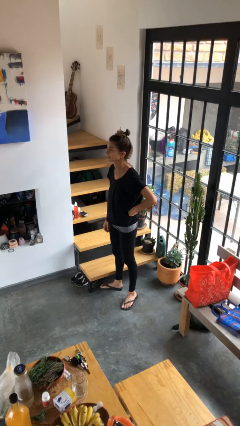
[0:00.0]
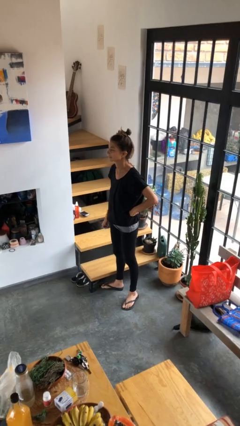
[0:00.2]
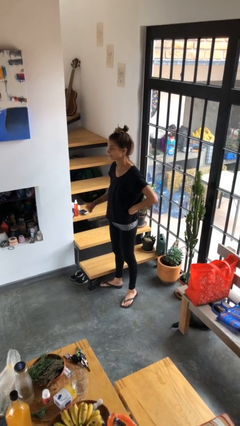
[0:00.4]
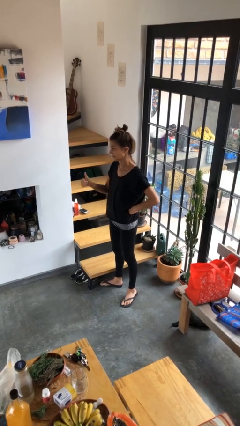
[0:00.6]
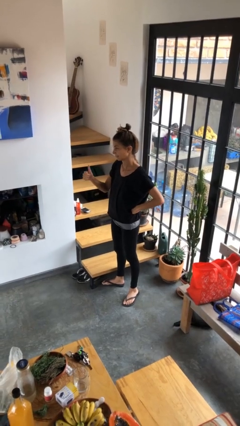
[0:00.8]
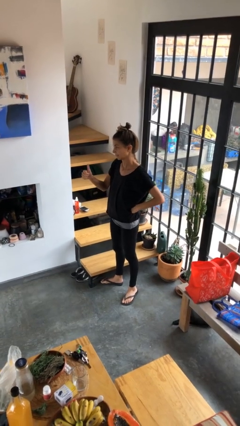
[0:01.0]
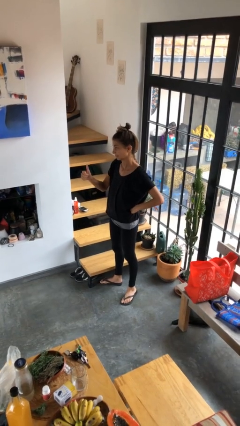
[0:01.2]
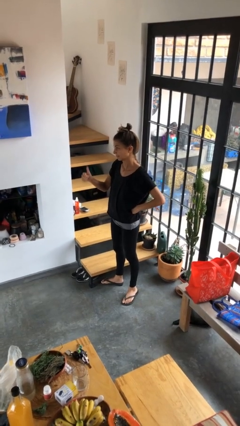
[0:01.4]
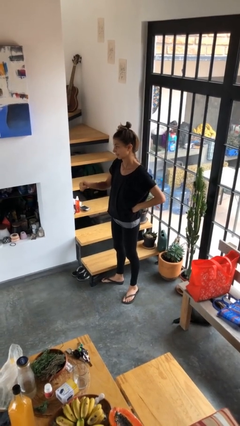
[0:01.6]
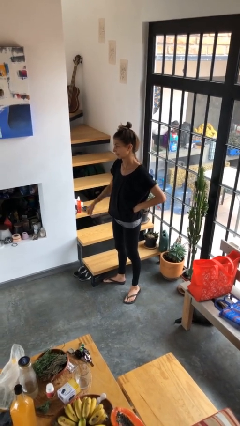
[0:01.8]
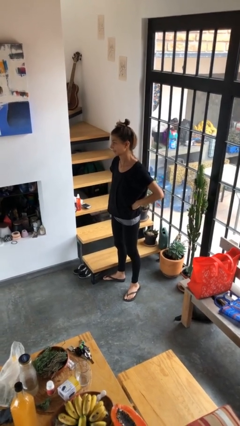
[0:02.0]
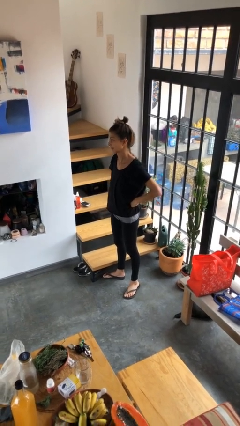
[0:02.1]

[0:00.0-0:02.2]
person gestures thumbs up

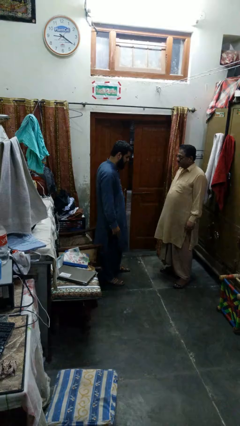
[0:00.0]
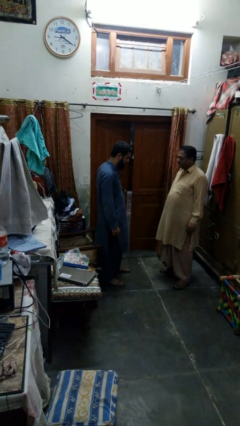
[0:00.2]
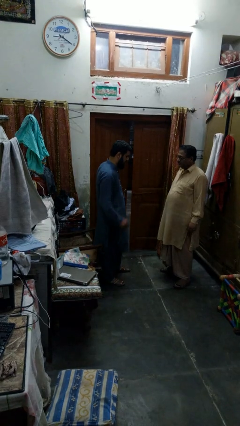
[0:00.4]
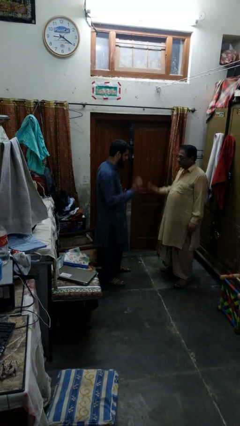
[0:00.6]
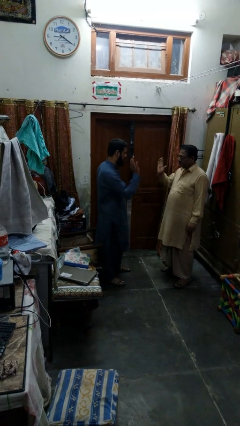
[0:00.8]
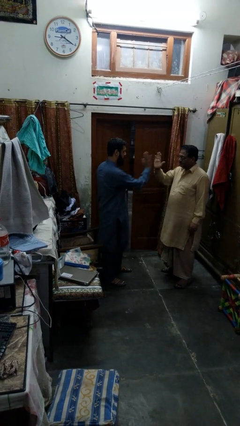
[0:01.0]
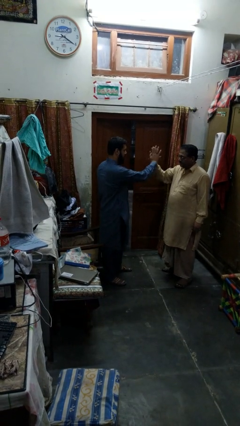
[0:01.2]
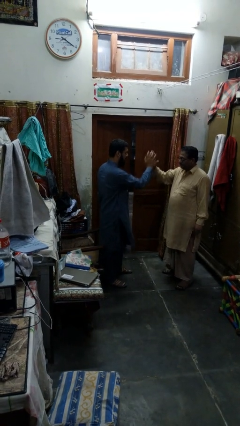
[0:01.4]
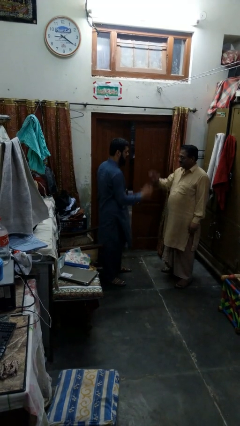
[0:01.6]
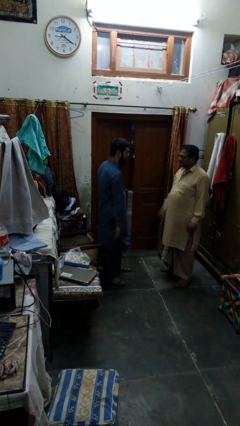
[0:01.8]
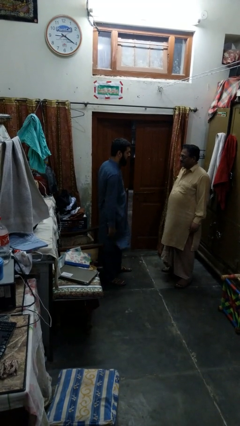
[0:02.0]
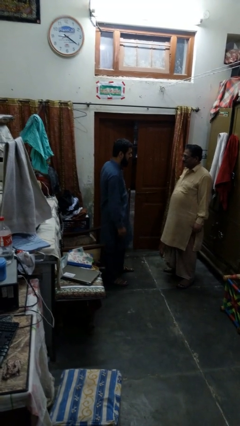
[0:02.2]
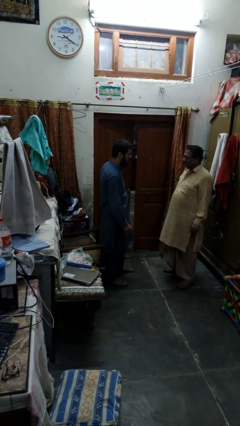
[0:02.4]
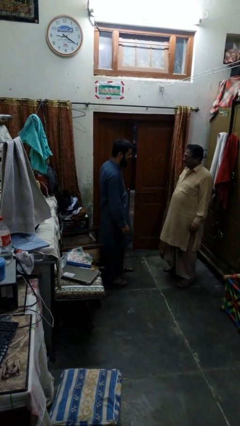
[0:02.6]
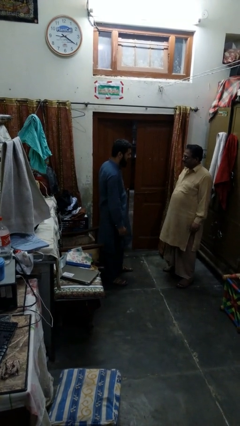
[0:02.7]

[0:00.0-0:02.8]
person highfives hand

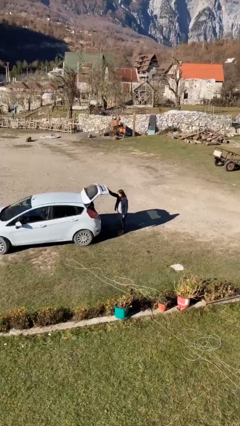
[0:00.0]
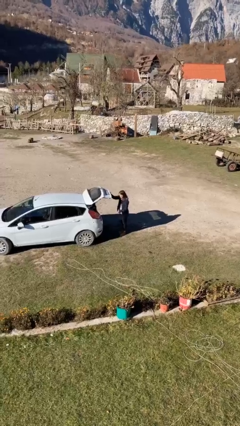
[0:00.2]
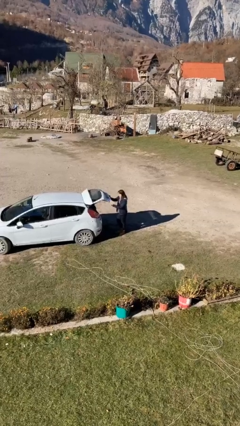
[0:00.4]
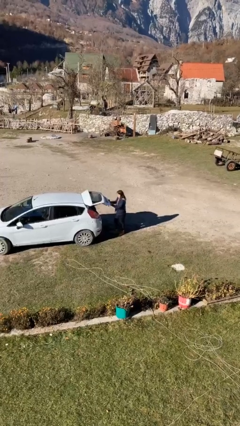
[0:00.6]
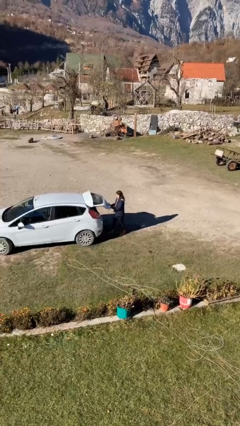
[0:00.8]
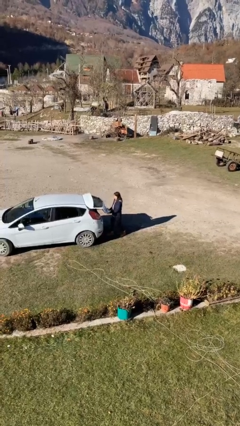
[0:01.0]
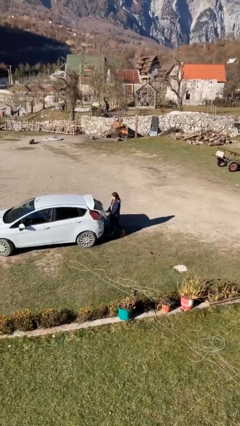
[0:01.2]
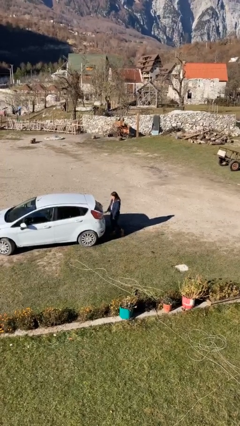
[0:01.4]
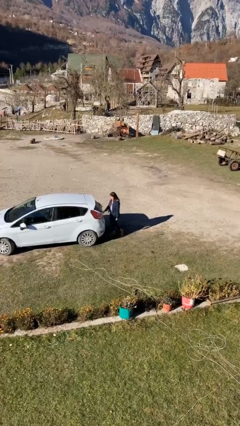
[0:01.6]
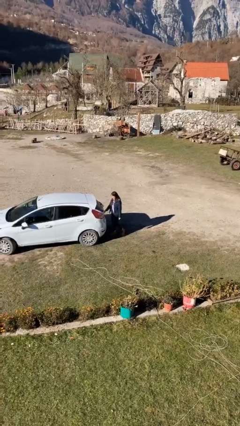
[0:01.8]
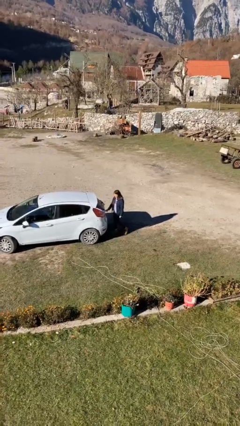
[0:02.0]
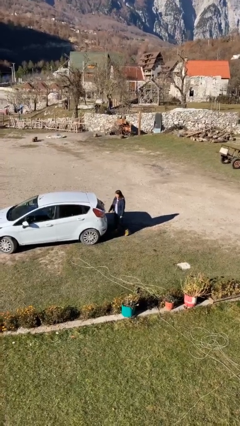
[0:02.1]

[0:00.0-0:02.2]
person closes car trunk

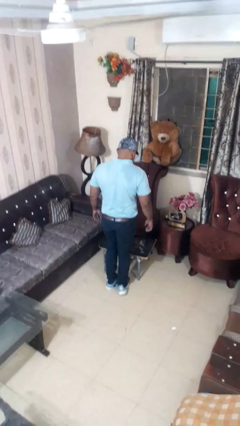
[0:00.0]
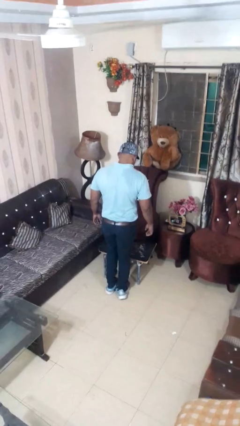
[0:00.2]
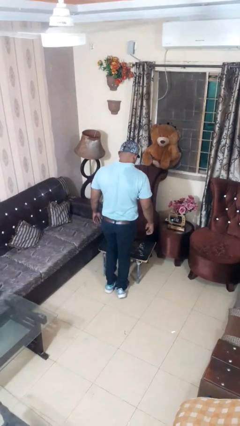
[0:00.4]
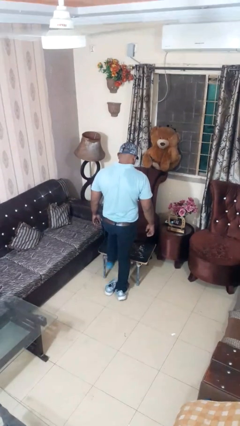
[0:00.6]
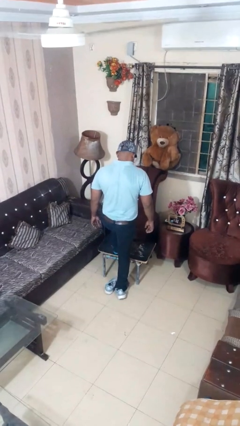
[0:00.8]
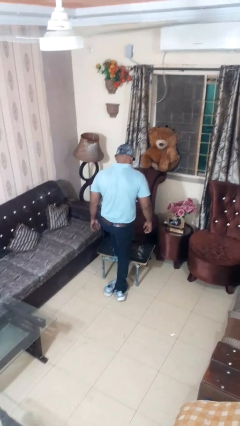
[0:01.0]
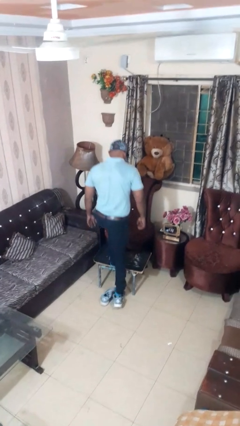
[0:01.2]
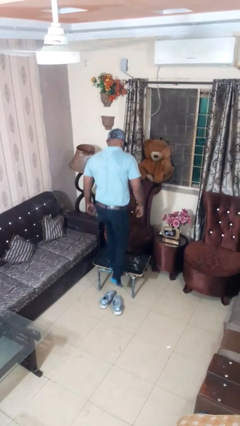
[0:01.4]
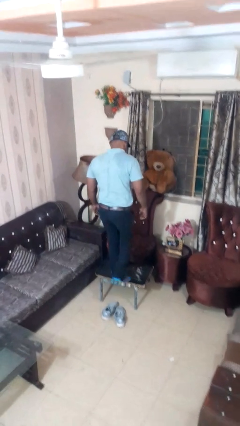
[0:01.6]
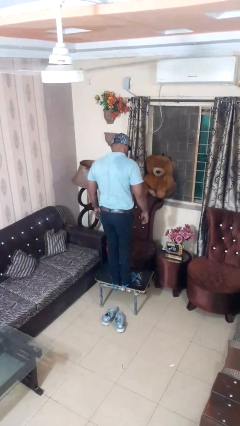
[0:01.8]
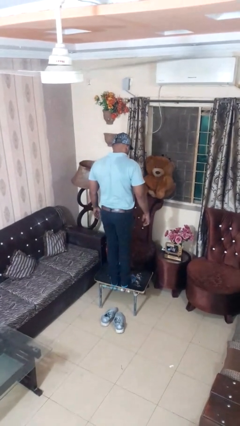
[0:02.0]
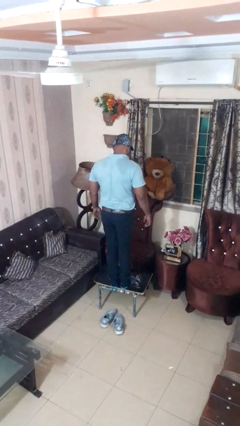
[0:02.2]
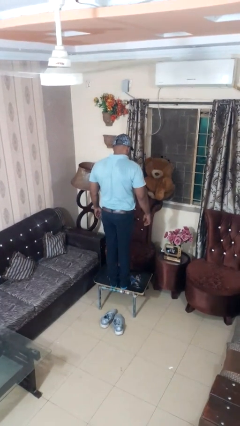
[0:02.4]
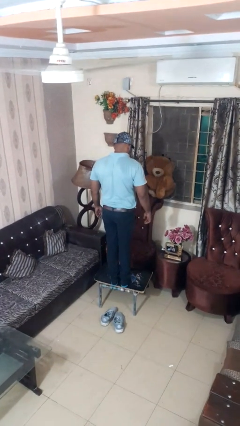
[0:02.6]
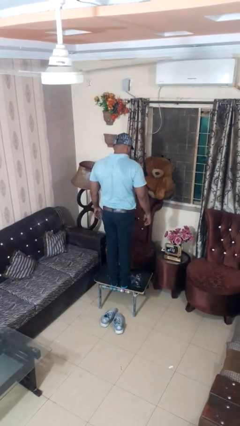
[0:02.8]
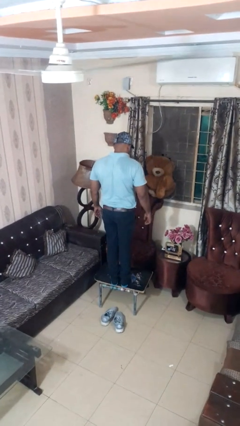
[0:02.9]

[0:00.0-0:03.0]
person climbs on table

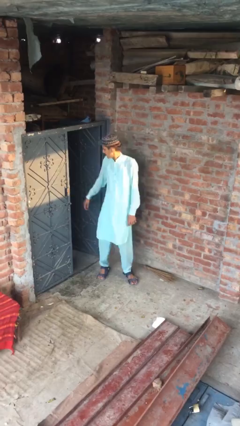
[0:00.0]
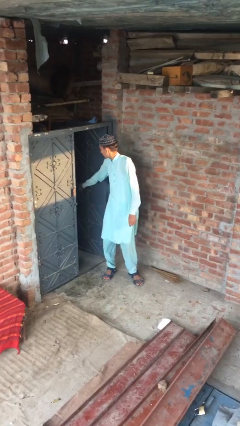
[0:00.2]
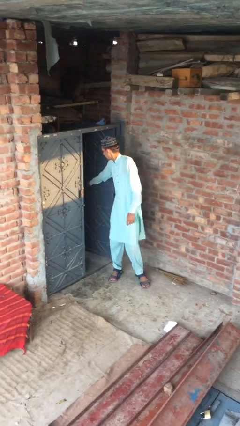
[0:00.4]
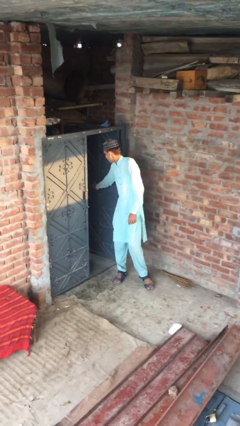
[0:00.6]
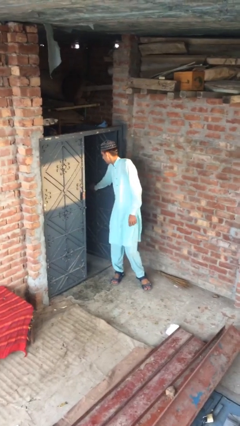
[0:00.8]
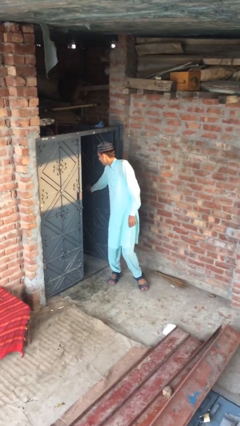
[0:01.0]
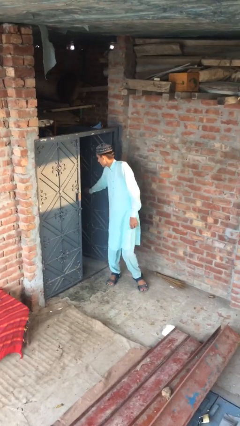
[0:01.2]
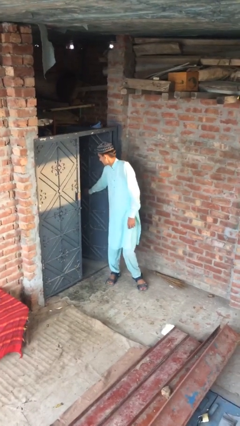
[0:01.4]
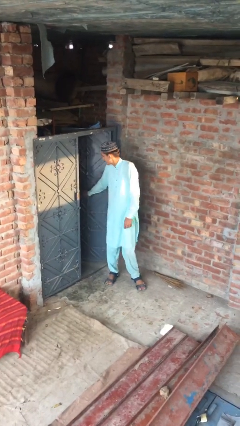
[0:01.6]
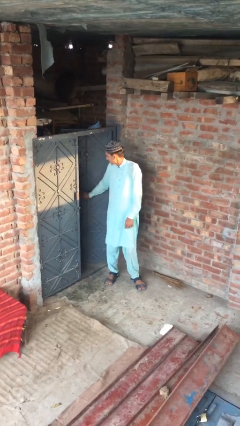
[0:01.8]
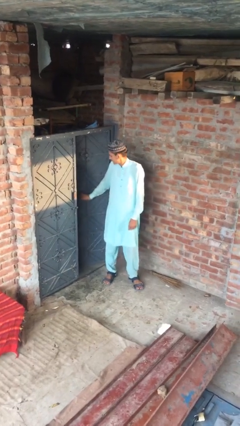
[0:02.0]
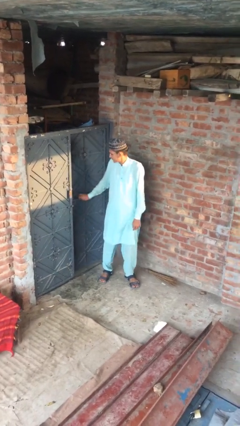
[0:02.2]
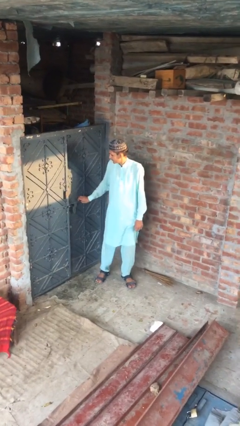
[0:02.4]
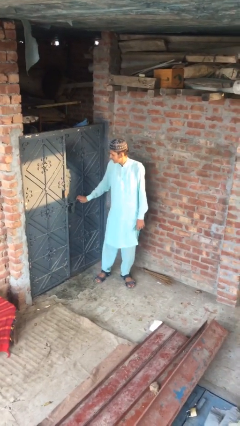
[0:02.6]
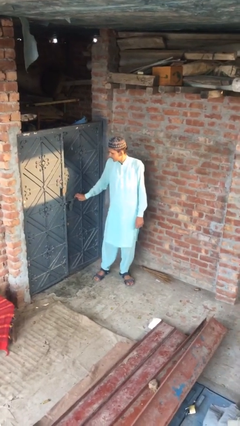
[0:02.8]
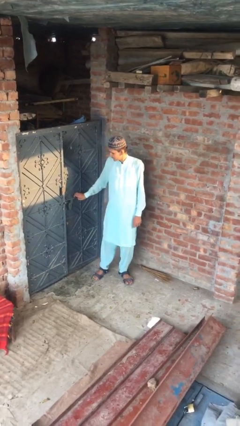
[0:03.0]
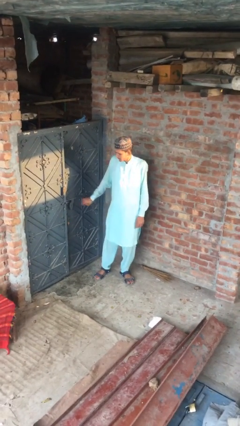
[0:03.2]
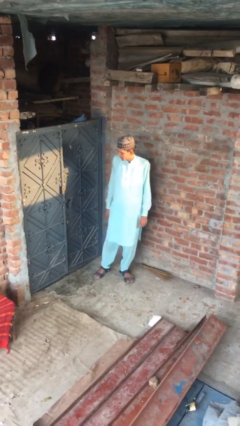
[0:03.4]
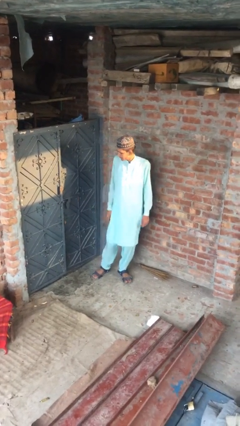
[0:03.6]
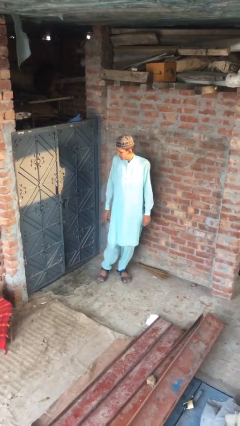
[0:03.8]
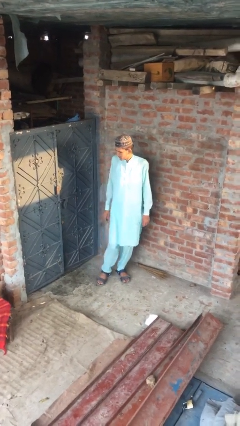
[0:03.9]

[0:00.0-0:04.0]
person closes facility door

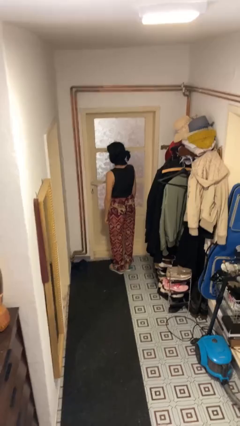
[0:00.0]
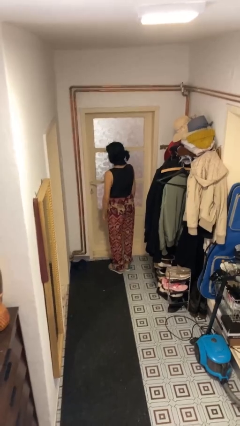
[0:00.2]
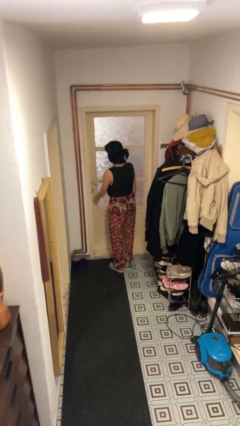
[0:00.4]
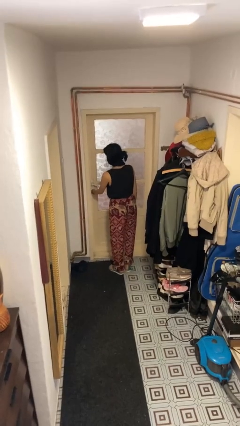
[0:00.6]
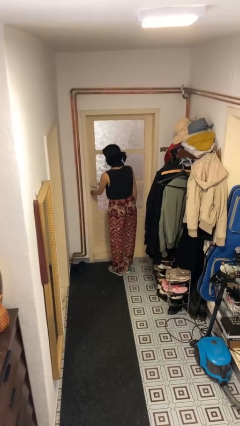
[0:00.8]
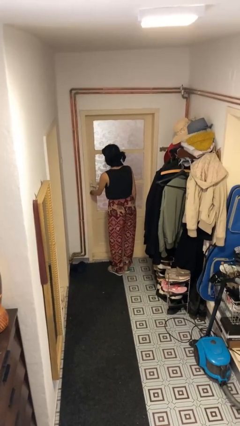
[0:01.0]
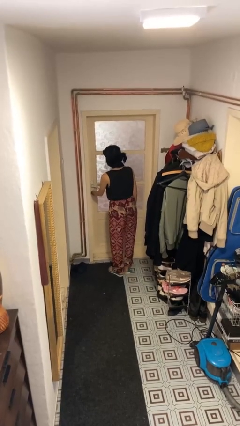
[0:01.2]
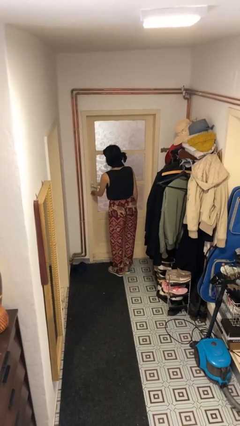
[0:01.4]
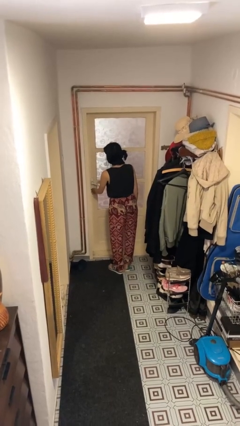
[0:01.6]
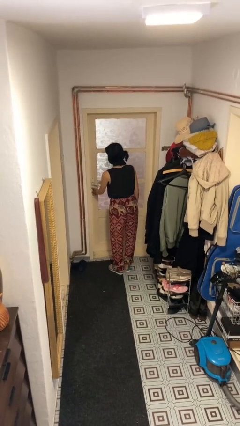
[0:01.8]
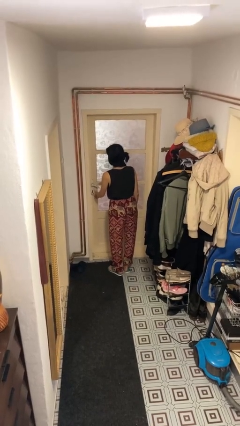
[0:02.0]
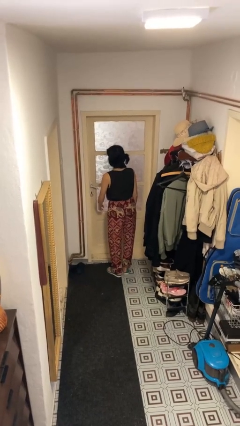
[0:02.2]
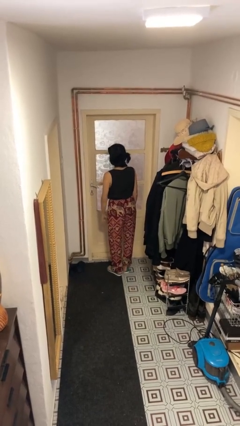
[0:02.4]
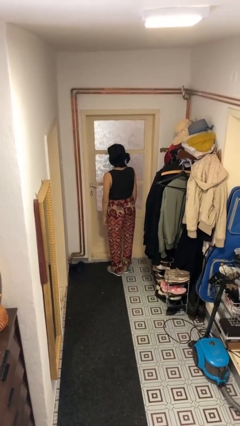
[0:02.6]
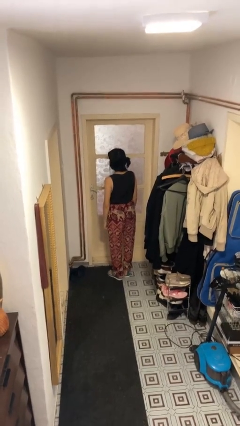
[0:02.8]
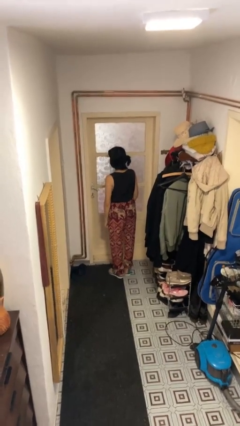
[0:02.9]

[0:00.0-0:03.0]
person unlocks door with keys

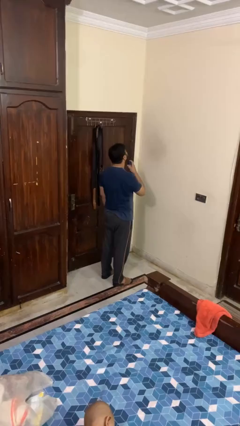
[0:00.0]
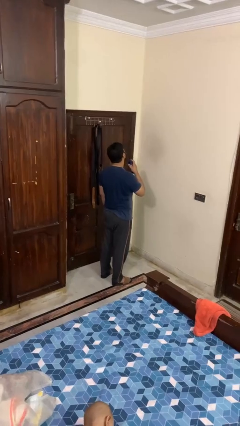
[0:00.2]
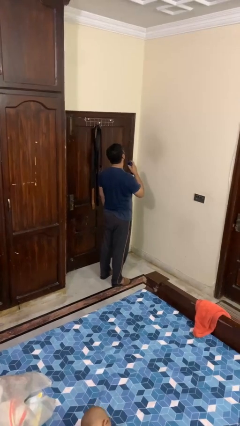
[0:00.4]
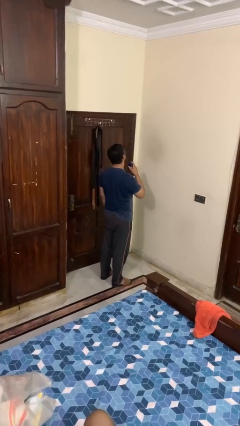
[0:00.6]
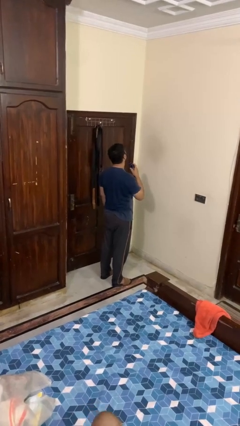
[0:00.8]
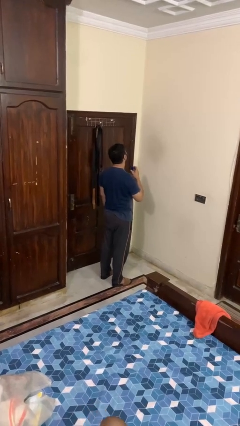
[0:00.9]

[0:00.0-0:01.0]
person applies deodorant
